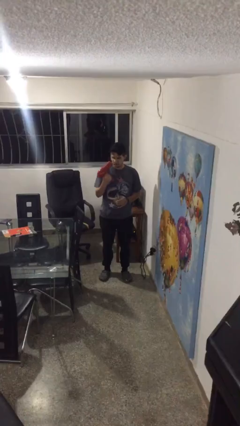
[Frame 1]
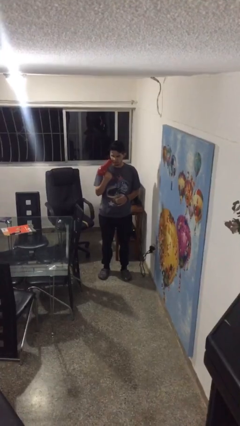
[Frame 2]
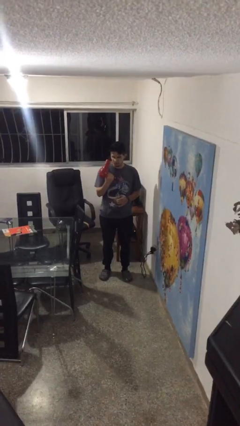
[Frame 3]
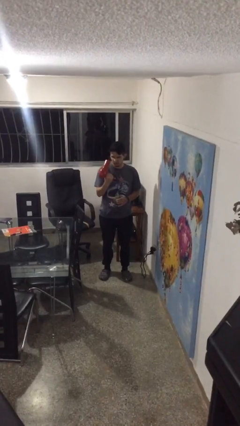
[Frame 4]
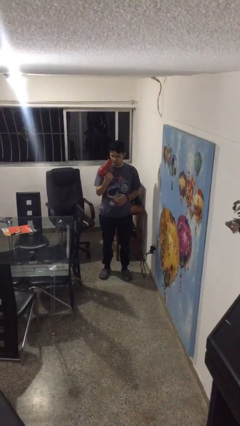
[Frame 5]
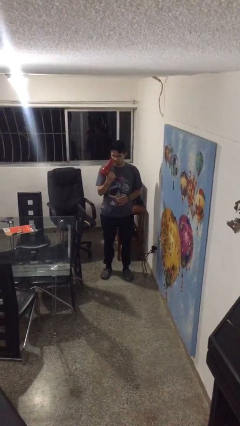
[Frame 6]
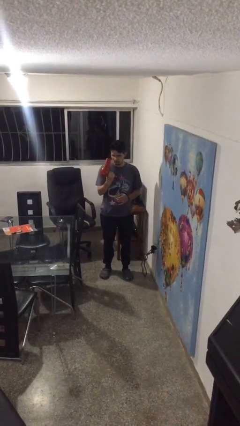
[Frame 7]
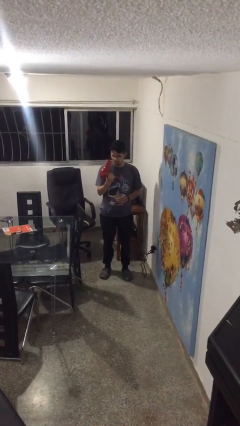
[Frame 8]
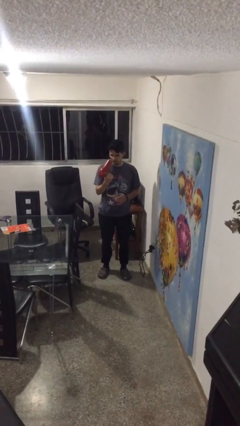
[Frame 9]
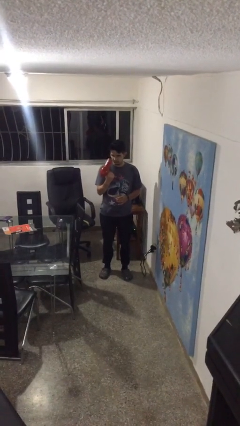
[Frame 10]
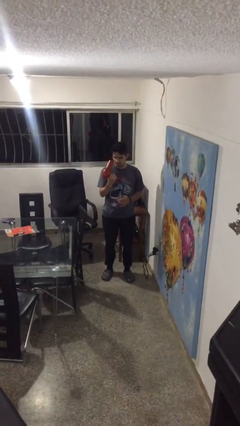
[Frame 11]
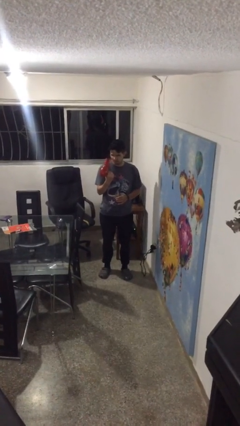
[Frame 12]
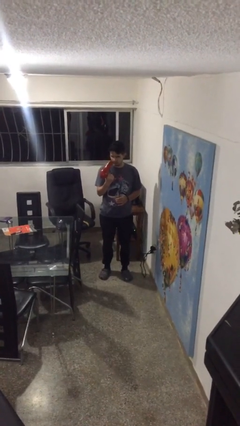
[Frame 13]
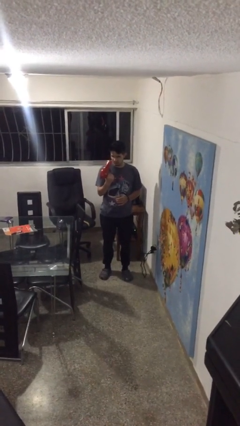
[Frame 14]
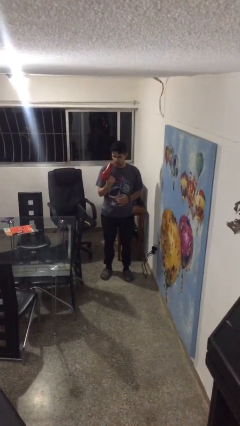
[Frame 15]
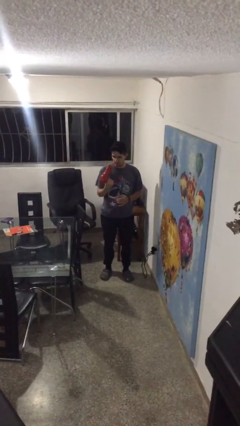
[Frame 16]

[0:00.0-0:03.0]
person dries hair with hairdryer

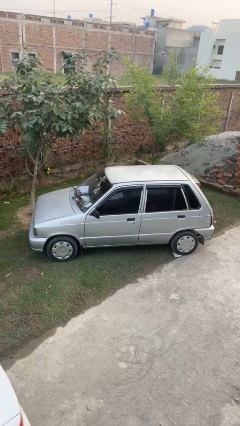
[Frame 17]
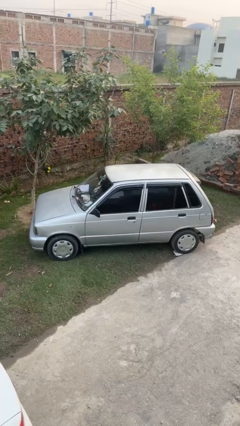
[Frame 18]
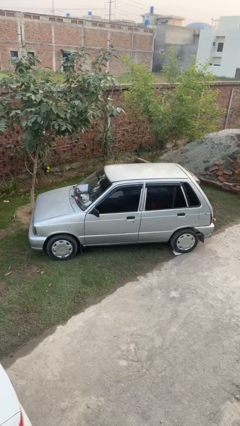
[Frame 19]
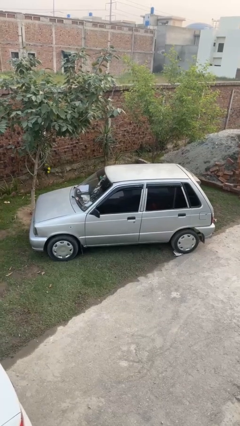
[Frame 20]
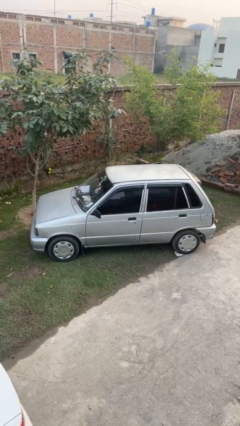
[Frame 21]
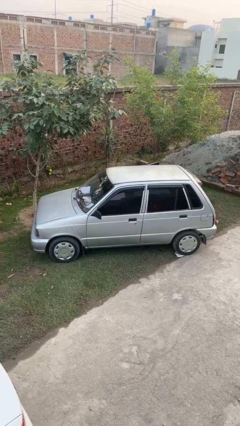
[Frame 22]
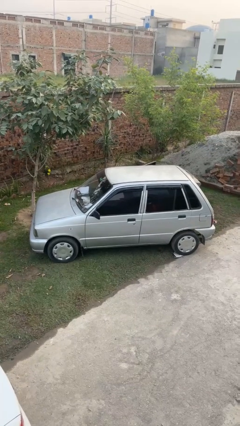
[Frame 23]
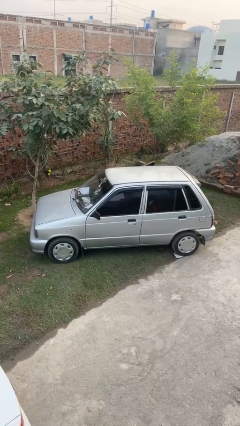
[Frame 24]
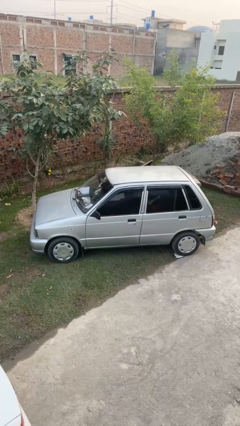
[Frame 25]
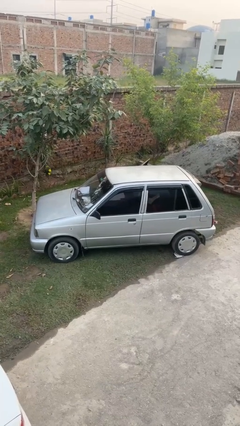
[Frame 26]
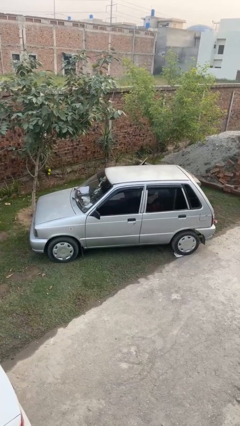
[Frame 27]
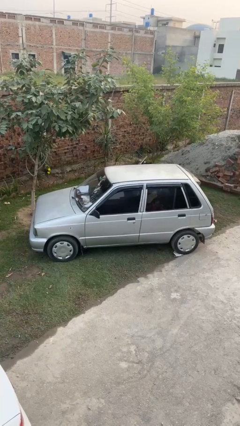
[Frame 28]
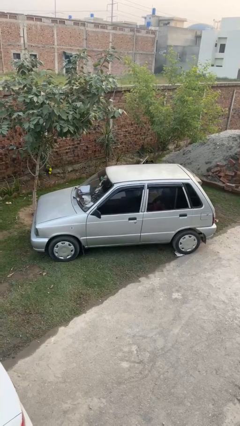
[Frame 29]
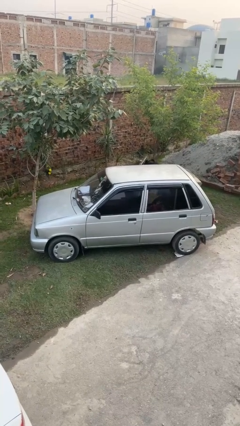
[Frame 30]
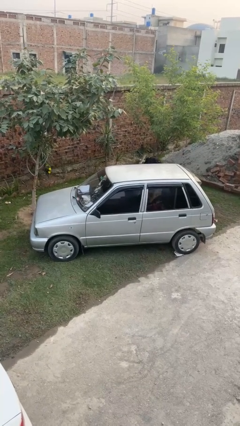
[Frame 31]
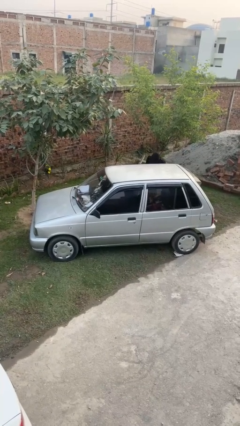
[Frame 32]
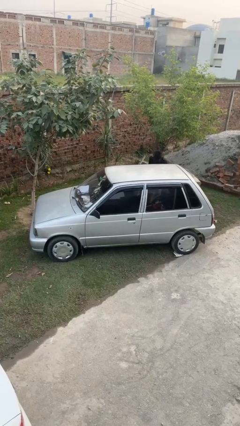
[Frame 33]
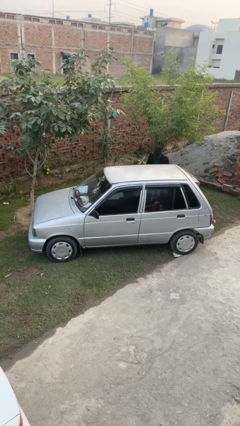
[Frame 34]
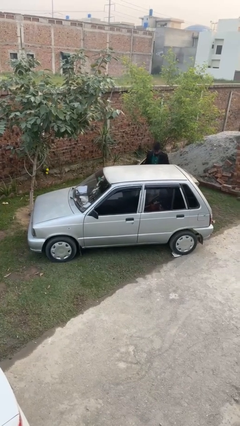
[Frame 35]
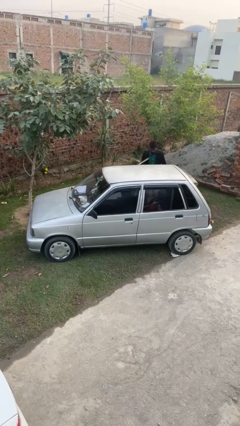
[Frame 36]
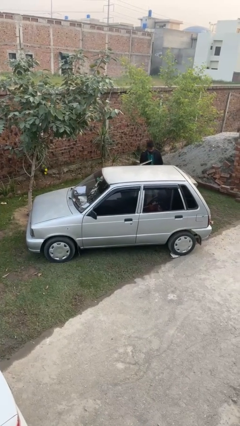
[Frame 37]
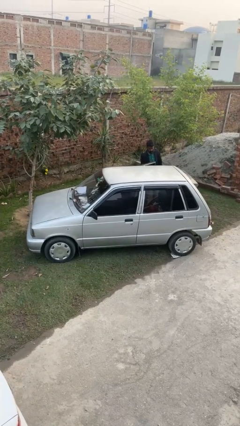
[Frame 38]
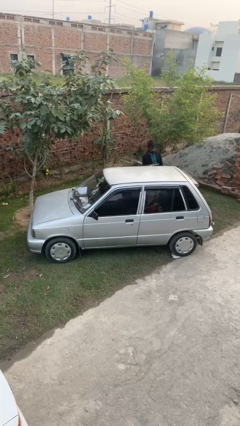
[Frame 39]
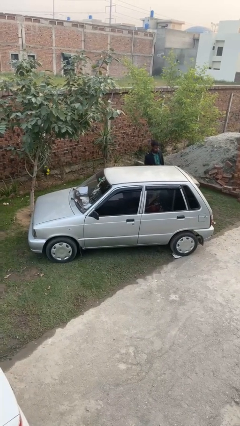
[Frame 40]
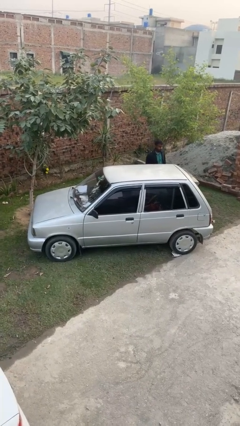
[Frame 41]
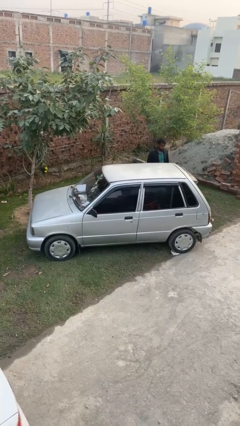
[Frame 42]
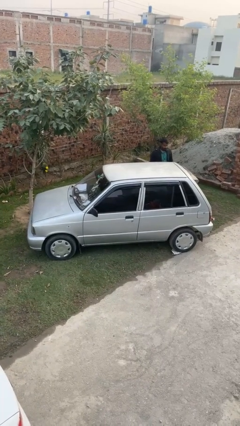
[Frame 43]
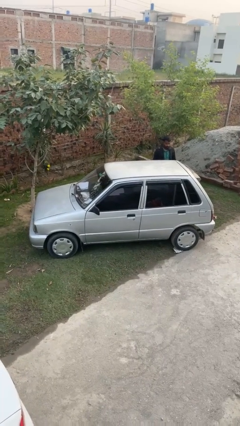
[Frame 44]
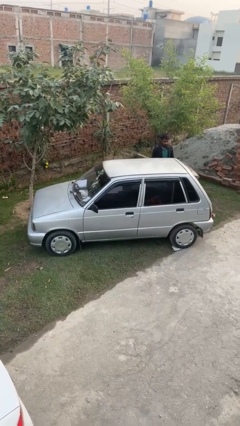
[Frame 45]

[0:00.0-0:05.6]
car drops off person

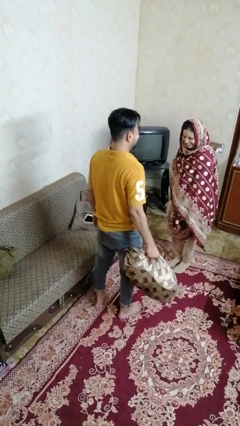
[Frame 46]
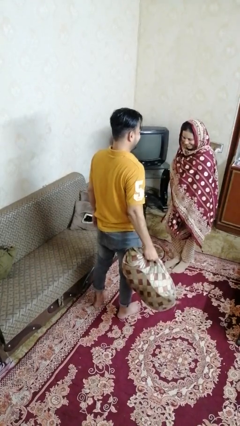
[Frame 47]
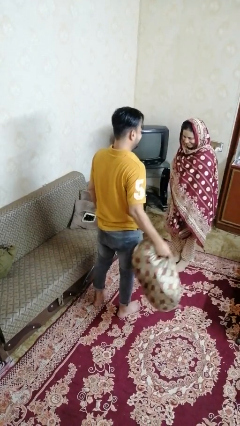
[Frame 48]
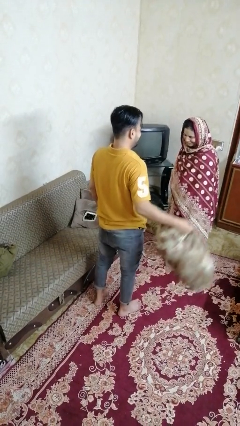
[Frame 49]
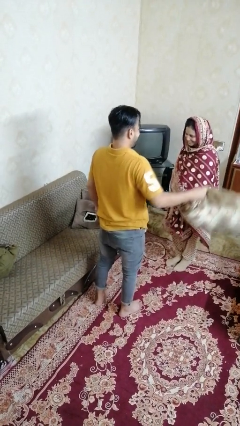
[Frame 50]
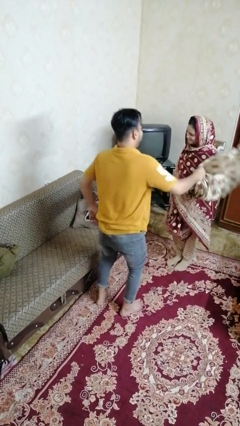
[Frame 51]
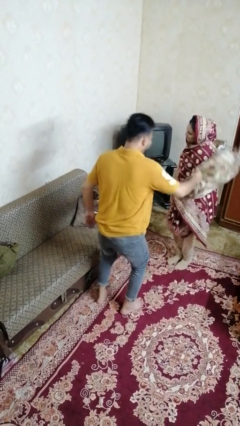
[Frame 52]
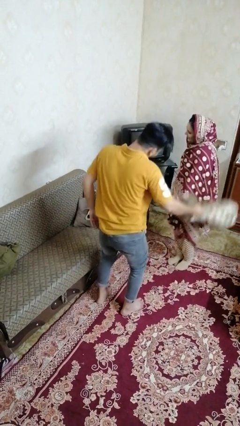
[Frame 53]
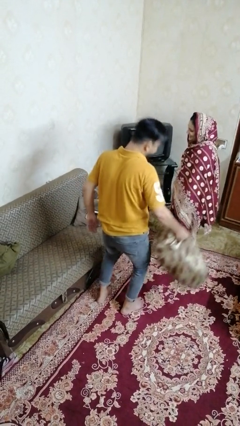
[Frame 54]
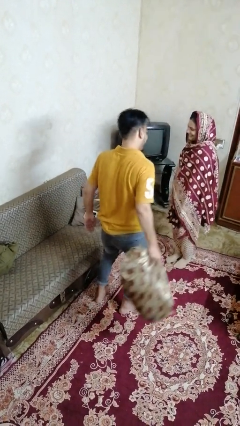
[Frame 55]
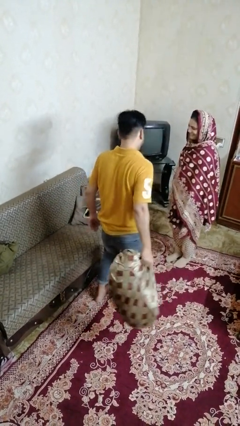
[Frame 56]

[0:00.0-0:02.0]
person hits person with pillow

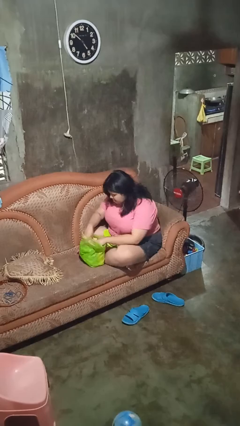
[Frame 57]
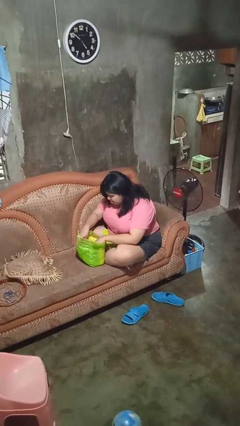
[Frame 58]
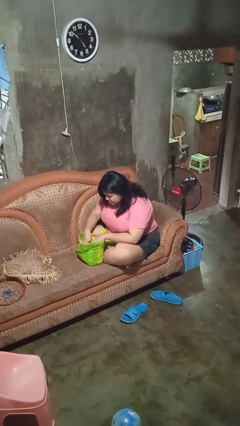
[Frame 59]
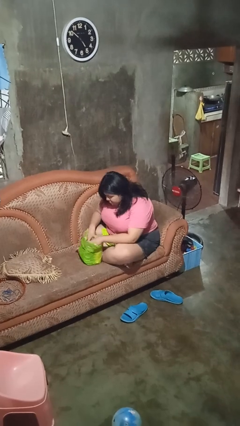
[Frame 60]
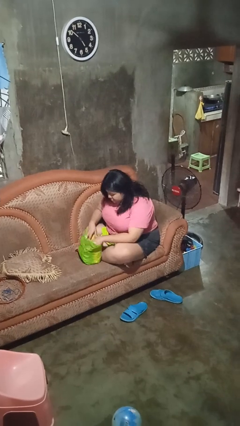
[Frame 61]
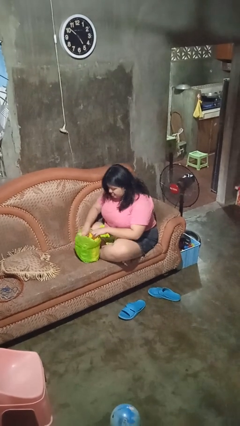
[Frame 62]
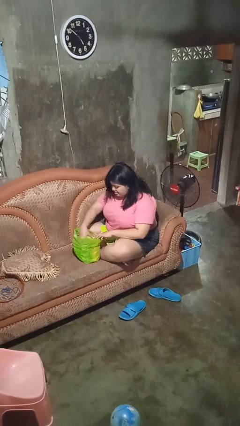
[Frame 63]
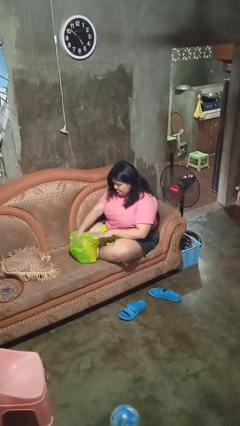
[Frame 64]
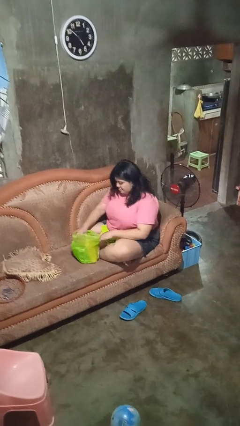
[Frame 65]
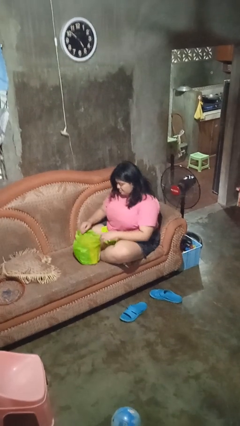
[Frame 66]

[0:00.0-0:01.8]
person searches in bag

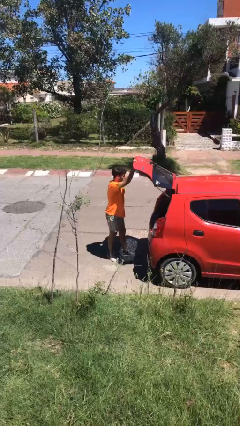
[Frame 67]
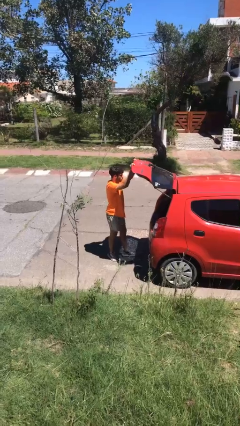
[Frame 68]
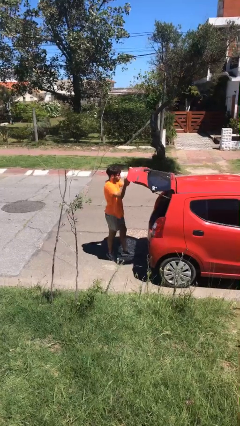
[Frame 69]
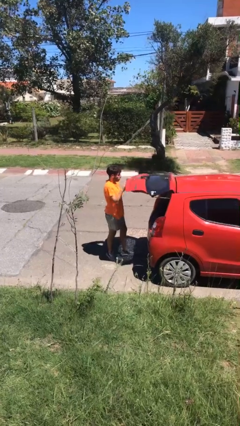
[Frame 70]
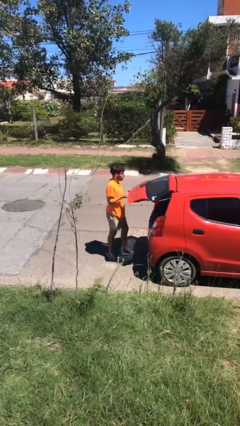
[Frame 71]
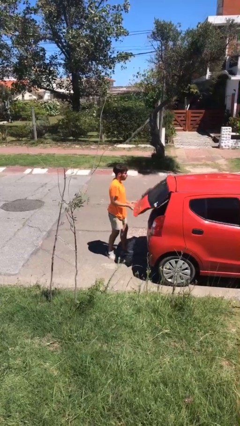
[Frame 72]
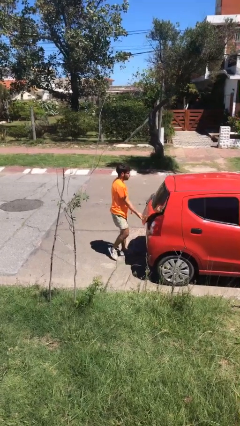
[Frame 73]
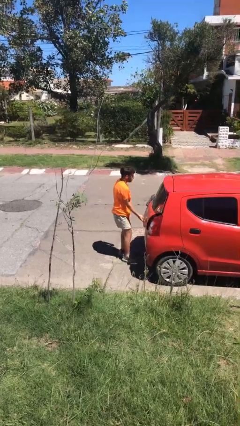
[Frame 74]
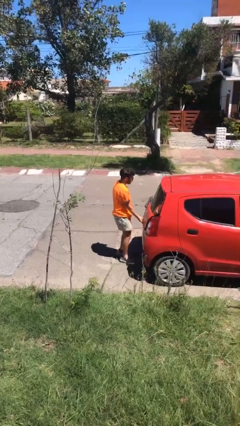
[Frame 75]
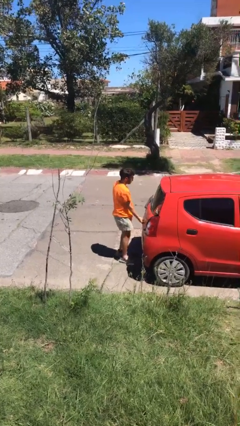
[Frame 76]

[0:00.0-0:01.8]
person closes car trunk

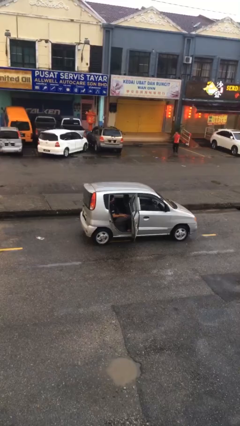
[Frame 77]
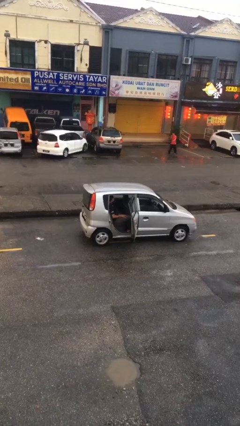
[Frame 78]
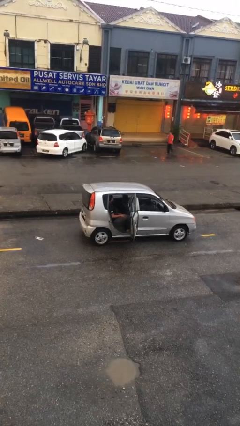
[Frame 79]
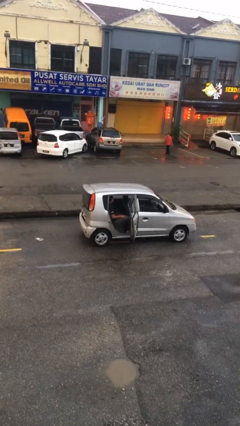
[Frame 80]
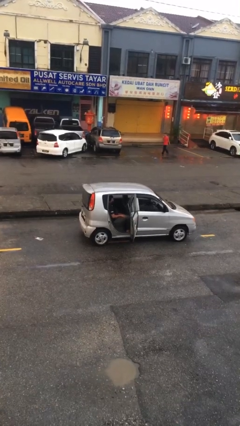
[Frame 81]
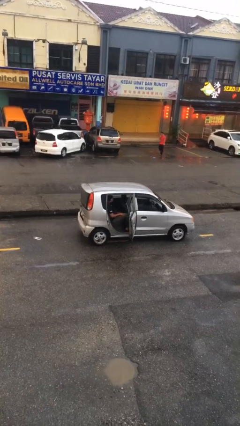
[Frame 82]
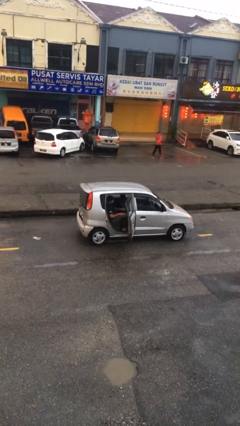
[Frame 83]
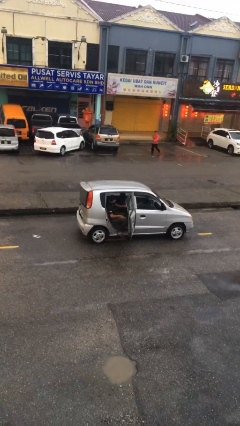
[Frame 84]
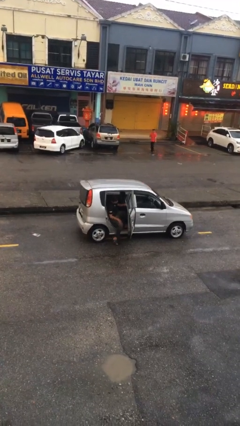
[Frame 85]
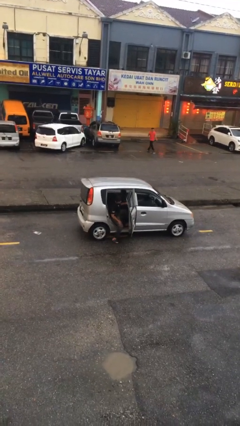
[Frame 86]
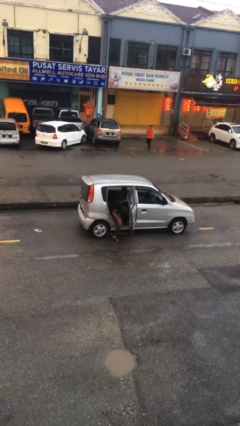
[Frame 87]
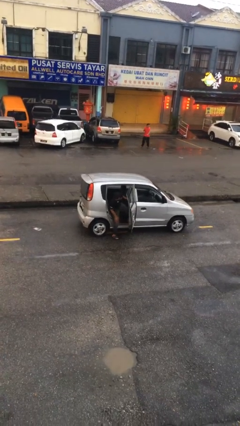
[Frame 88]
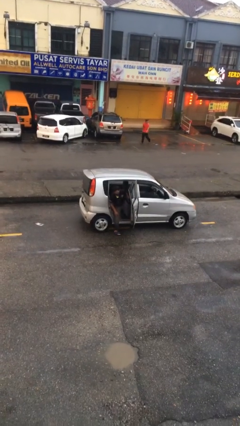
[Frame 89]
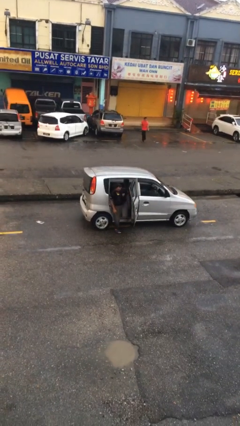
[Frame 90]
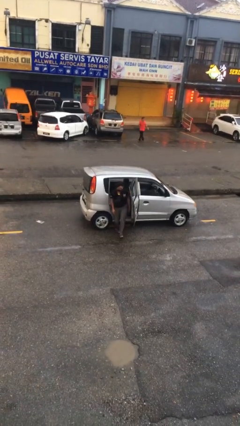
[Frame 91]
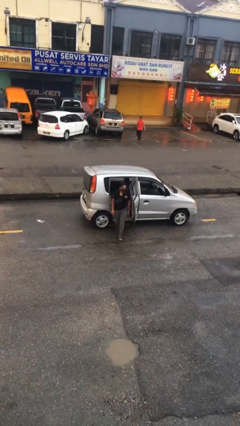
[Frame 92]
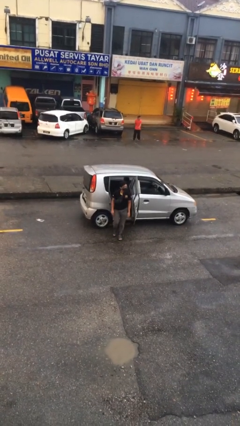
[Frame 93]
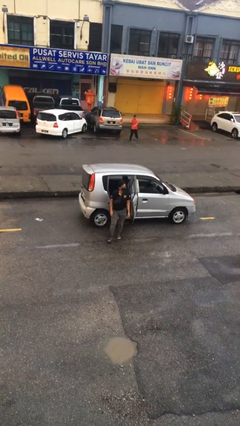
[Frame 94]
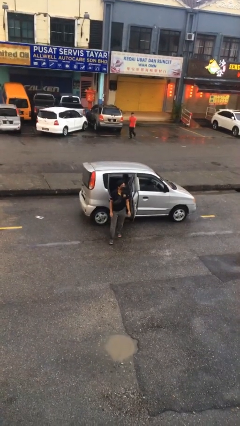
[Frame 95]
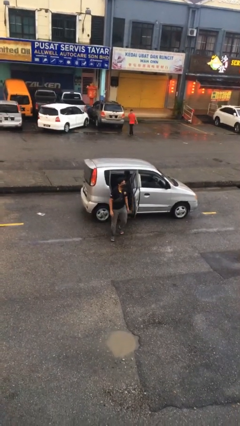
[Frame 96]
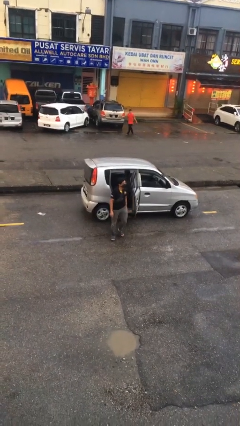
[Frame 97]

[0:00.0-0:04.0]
person exits car
